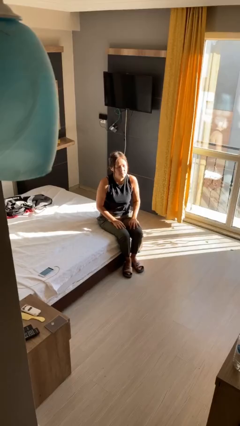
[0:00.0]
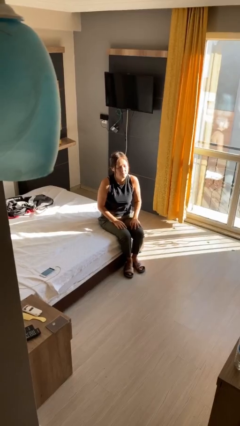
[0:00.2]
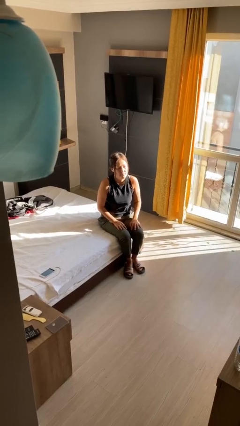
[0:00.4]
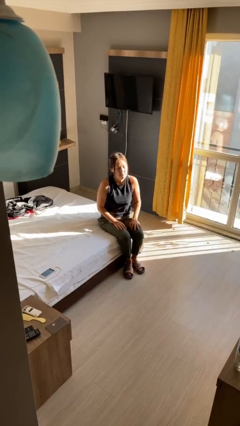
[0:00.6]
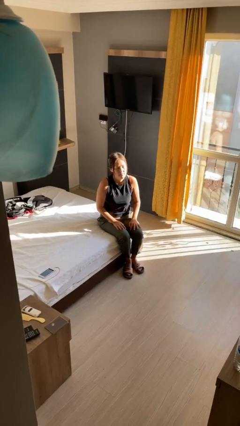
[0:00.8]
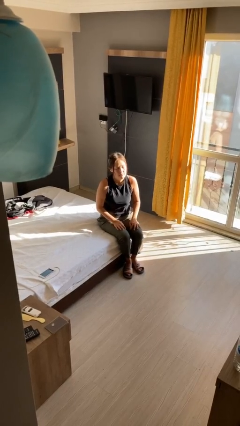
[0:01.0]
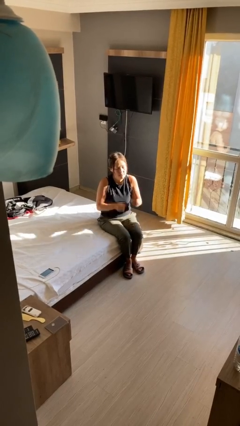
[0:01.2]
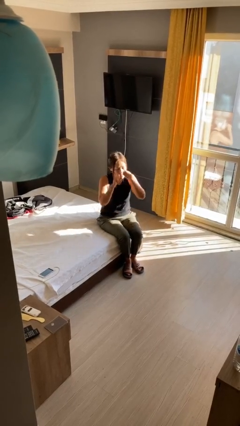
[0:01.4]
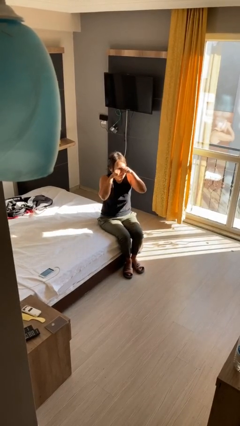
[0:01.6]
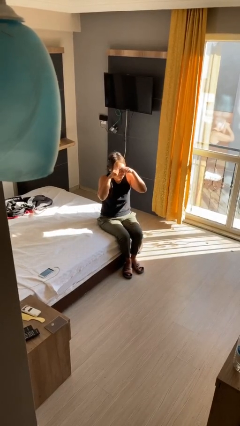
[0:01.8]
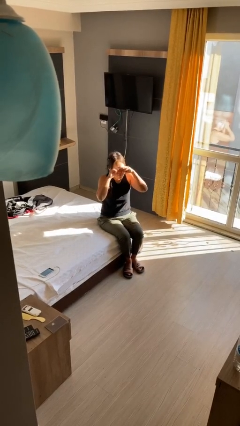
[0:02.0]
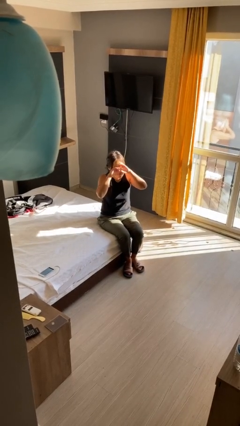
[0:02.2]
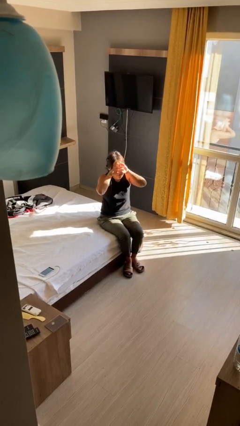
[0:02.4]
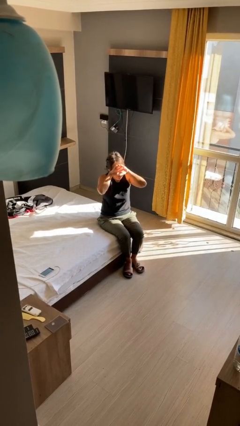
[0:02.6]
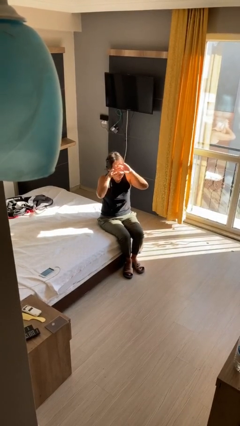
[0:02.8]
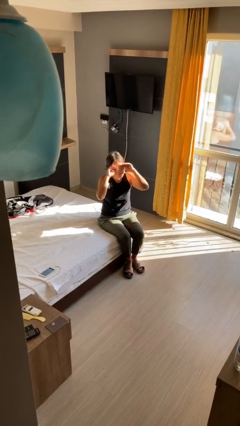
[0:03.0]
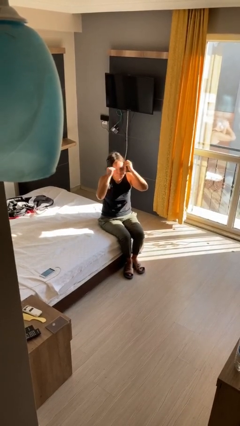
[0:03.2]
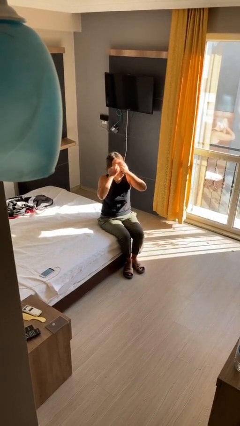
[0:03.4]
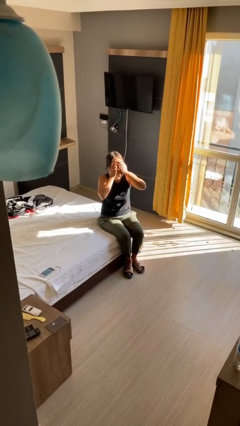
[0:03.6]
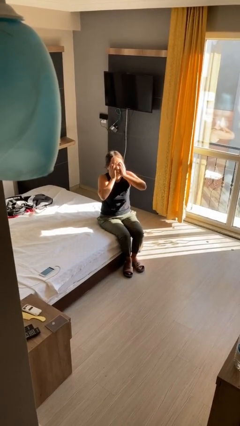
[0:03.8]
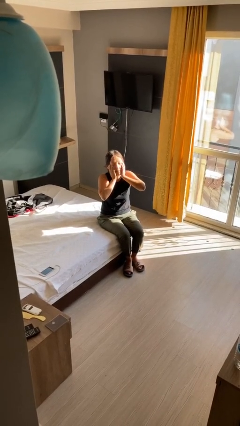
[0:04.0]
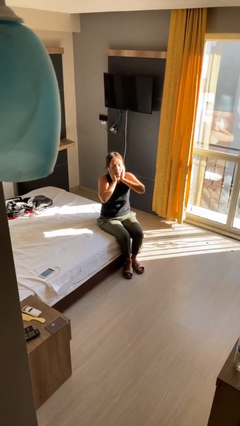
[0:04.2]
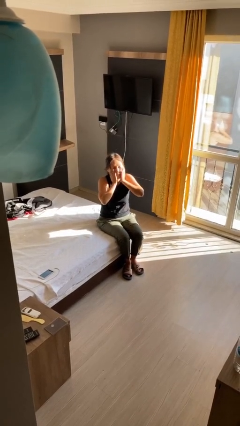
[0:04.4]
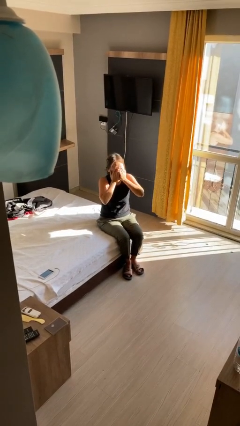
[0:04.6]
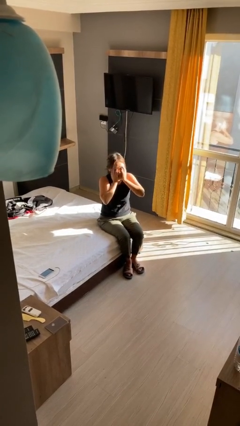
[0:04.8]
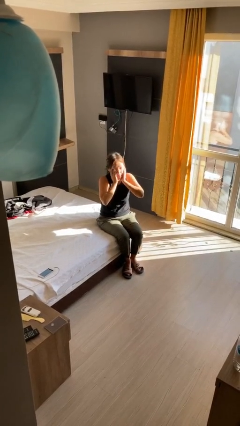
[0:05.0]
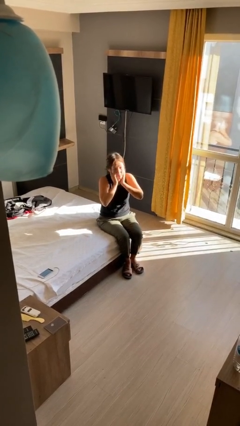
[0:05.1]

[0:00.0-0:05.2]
person rubs eyes

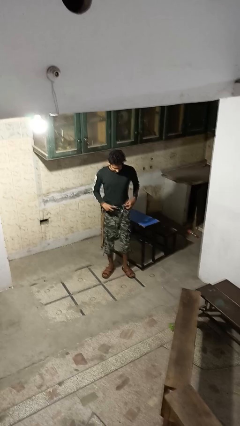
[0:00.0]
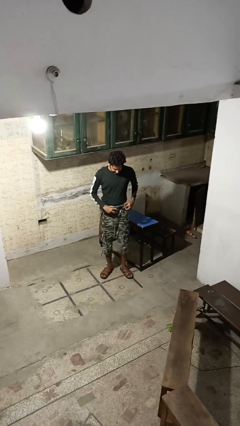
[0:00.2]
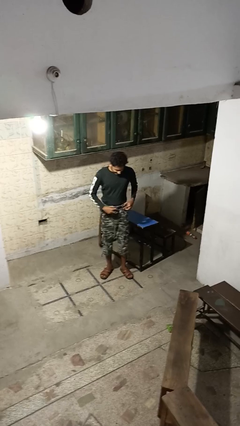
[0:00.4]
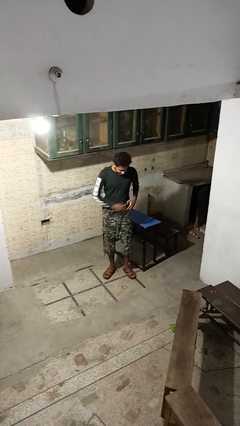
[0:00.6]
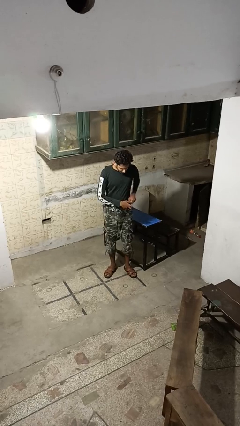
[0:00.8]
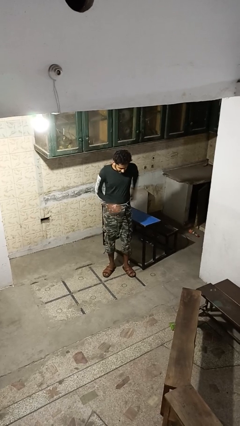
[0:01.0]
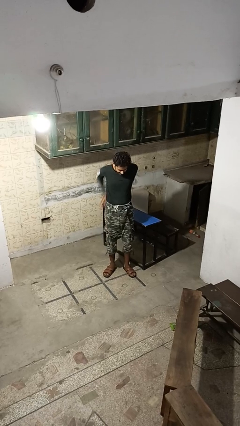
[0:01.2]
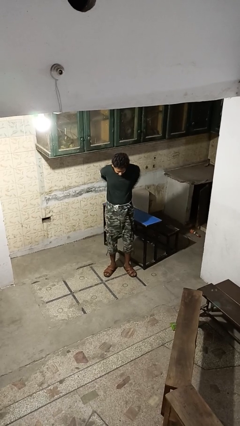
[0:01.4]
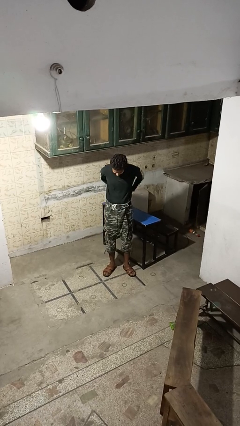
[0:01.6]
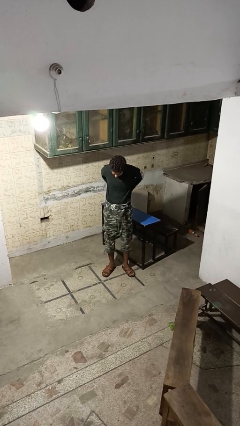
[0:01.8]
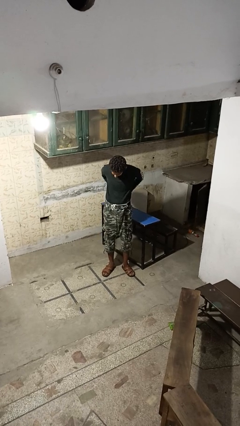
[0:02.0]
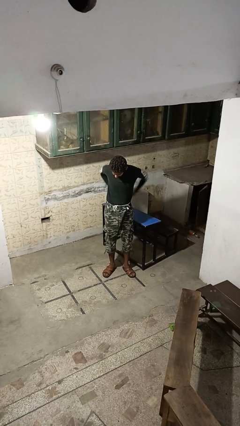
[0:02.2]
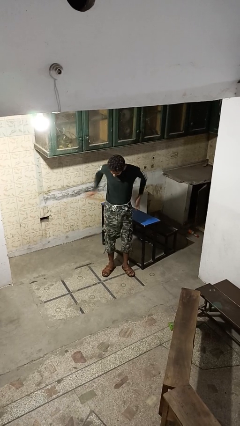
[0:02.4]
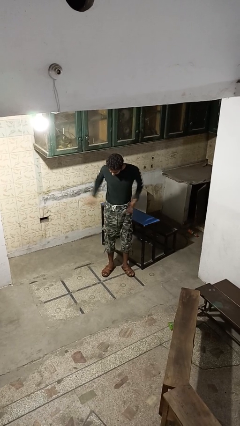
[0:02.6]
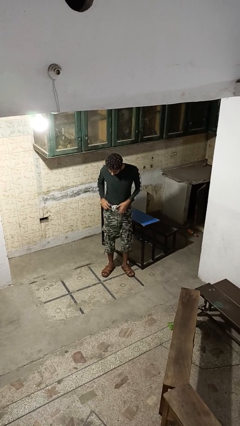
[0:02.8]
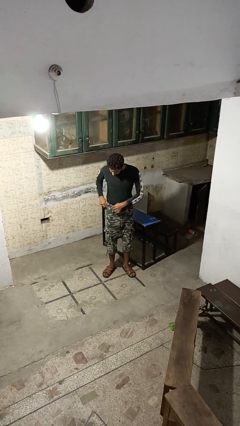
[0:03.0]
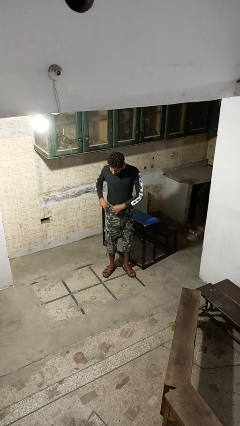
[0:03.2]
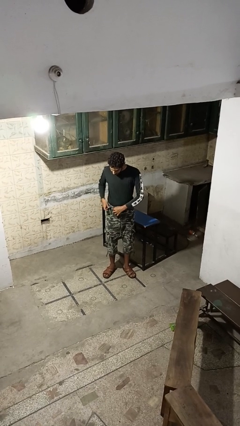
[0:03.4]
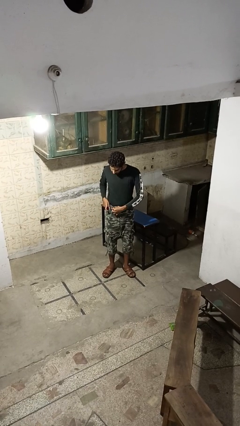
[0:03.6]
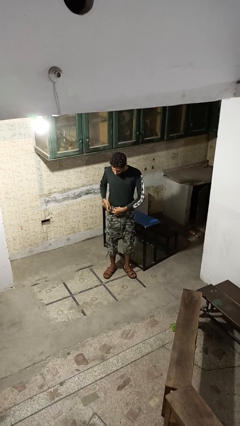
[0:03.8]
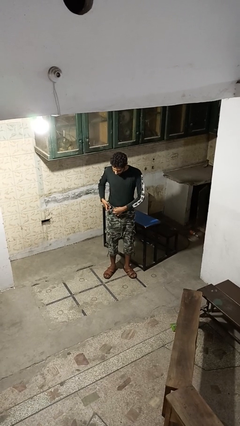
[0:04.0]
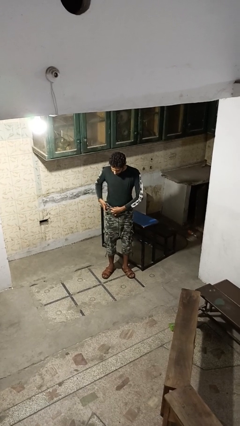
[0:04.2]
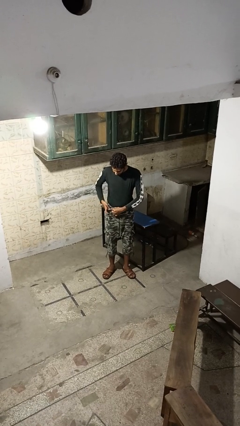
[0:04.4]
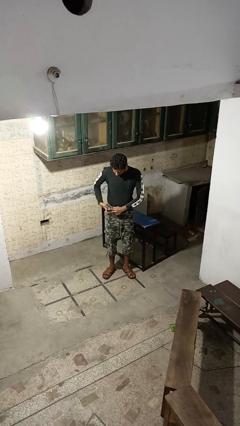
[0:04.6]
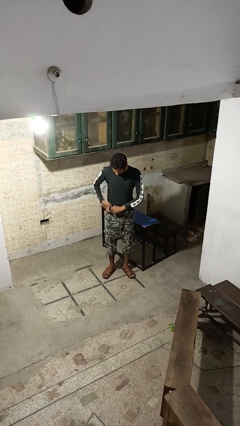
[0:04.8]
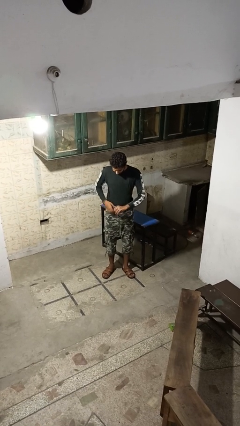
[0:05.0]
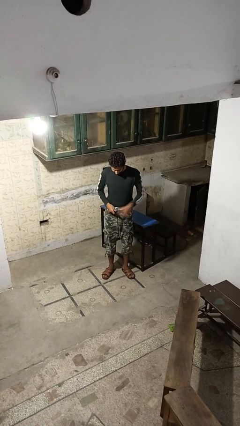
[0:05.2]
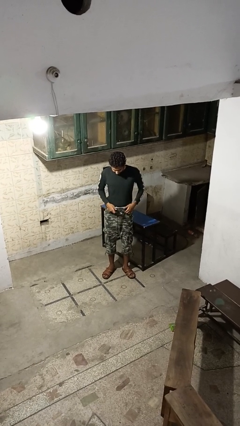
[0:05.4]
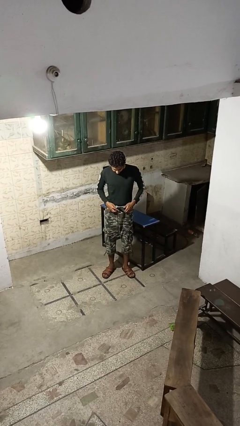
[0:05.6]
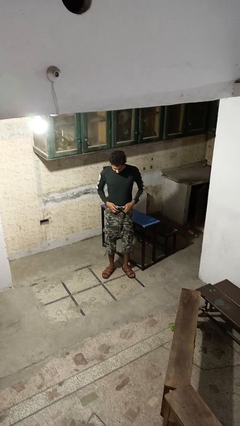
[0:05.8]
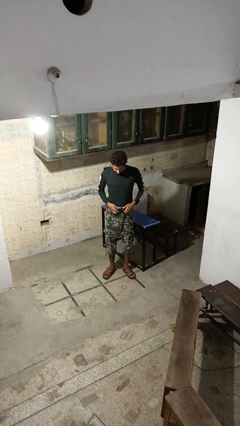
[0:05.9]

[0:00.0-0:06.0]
person puts on belt

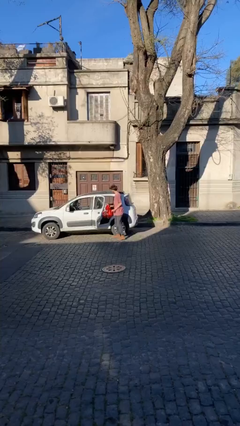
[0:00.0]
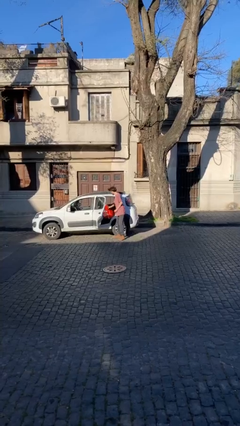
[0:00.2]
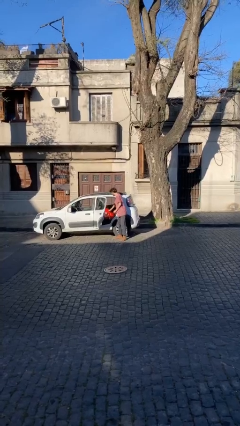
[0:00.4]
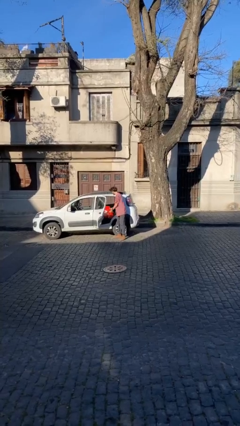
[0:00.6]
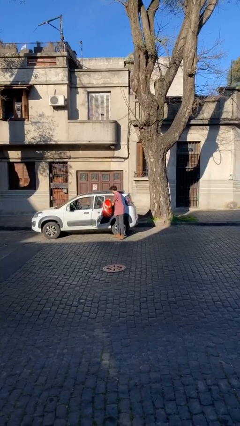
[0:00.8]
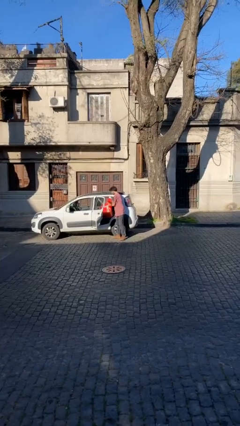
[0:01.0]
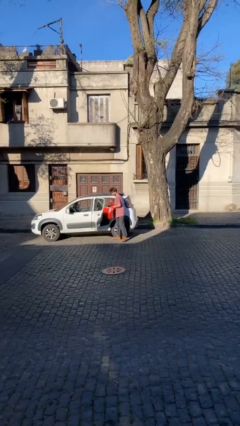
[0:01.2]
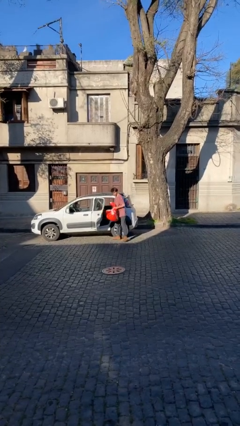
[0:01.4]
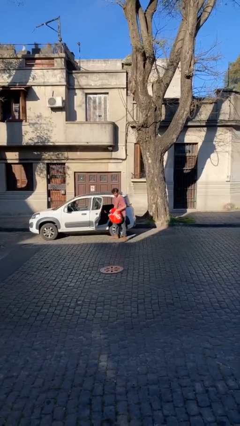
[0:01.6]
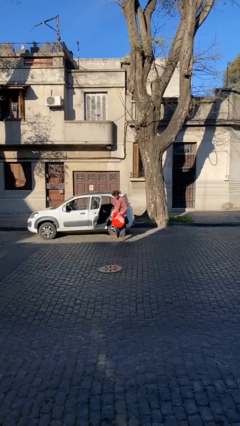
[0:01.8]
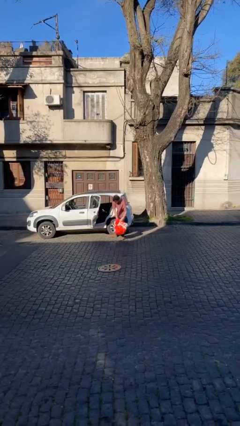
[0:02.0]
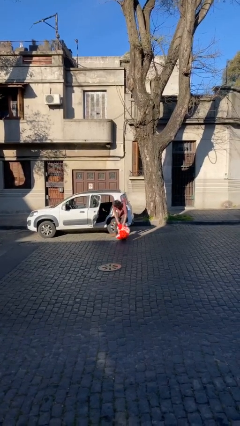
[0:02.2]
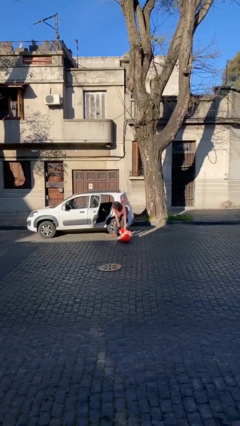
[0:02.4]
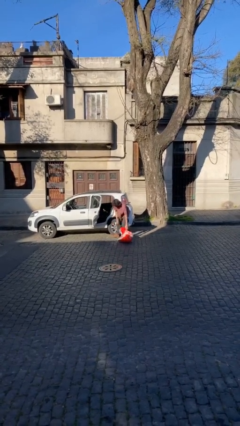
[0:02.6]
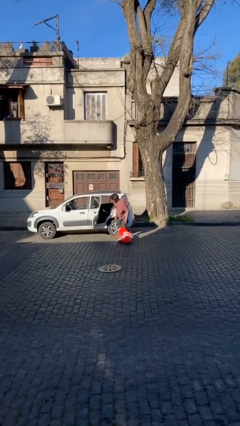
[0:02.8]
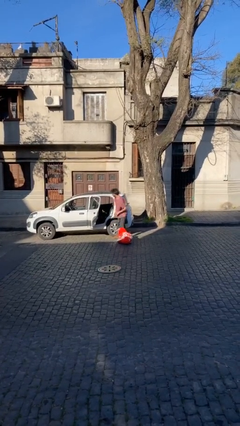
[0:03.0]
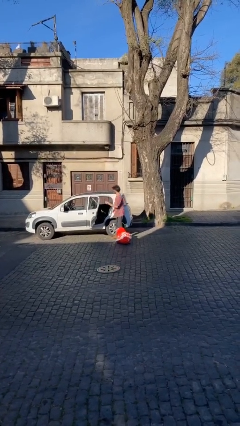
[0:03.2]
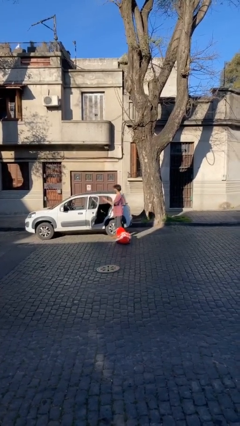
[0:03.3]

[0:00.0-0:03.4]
person unloads car

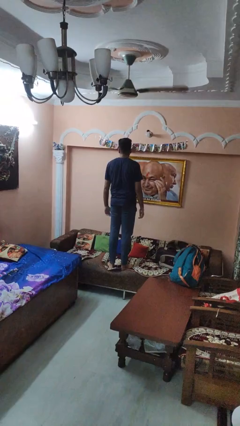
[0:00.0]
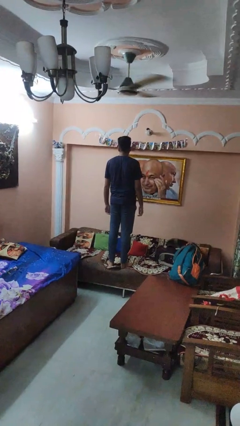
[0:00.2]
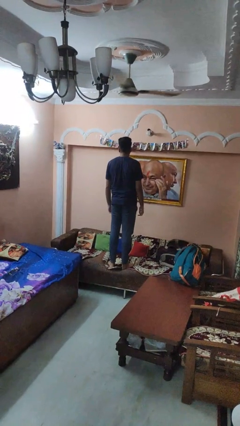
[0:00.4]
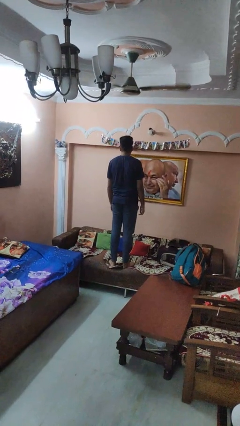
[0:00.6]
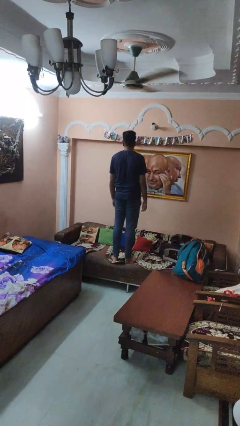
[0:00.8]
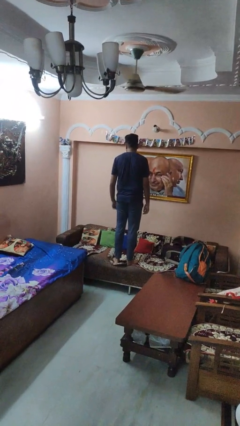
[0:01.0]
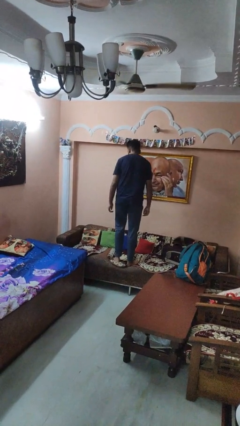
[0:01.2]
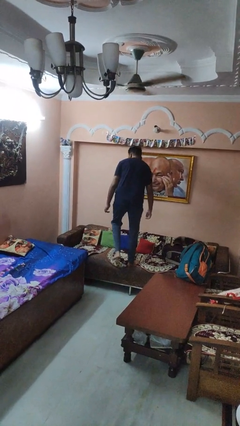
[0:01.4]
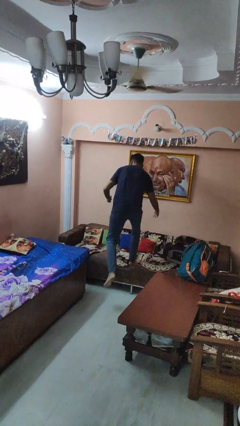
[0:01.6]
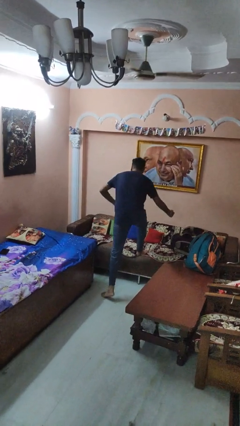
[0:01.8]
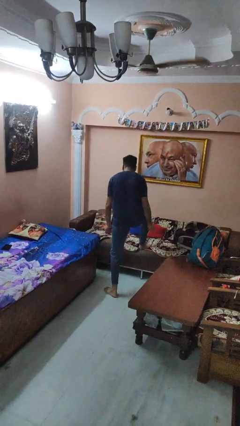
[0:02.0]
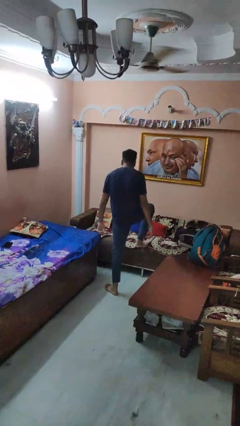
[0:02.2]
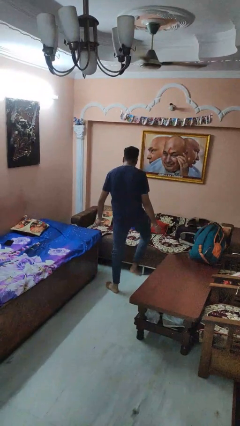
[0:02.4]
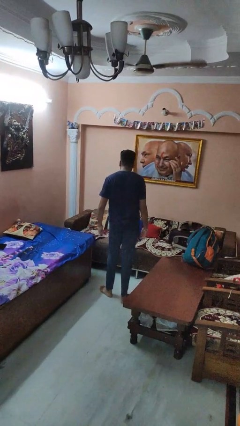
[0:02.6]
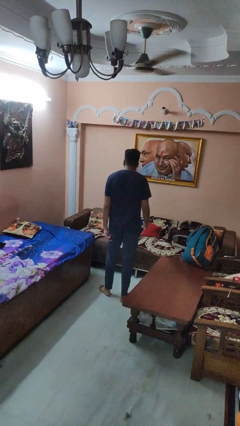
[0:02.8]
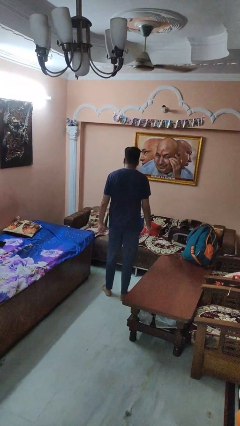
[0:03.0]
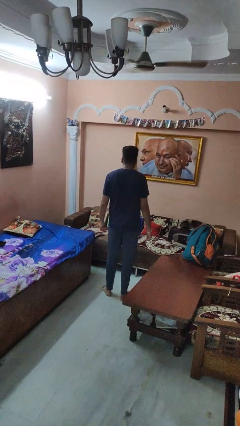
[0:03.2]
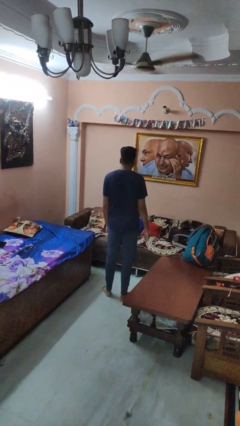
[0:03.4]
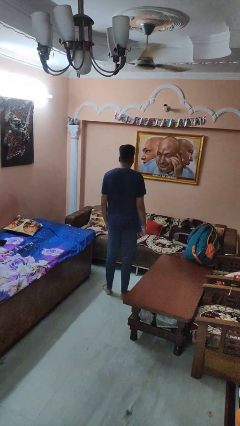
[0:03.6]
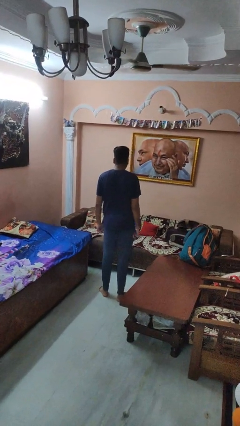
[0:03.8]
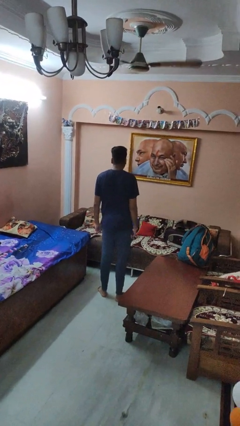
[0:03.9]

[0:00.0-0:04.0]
person climbs off couch
